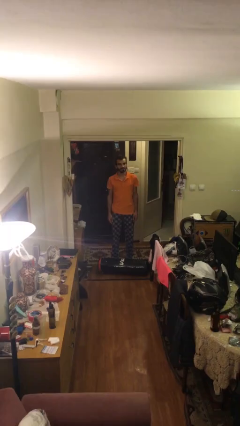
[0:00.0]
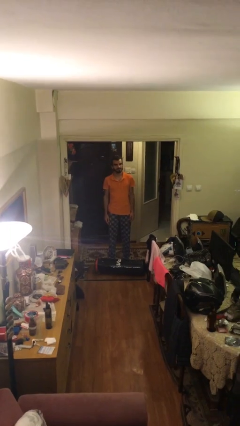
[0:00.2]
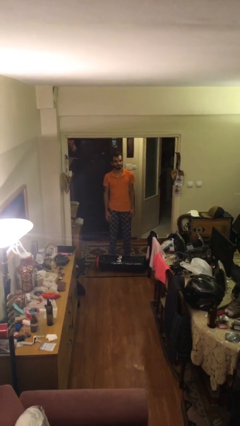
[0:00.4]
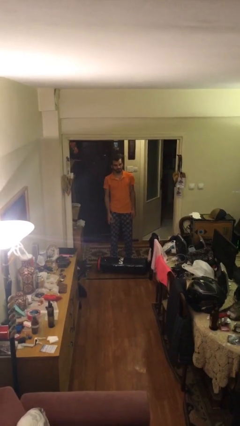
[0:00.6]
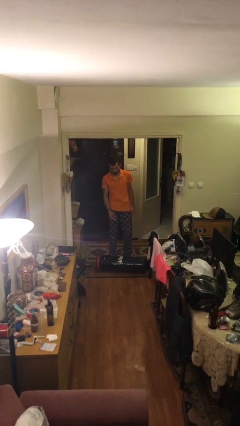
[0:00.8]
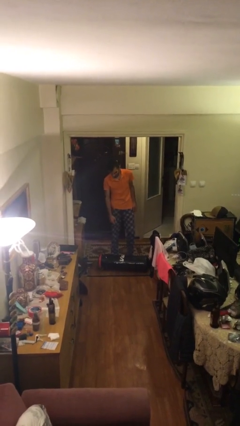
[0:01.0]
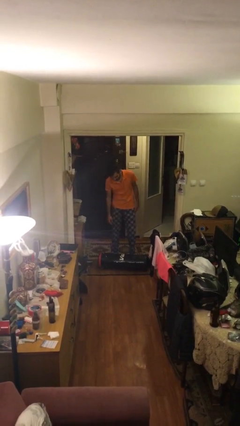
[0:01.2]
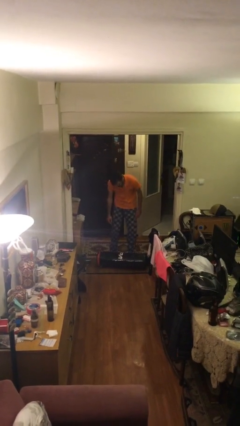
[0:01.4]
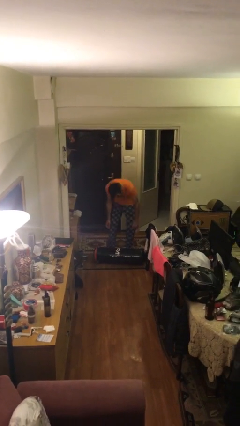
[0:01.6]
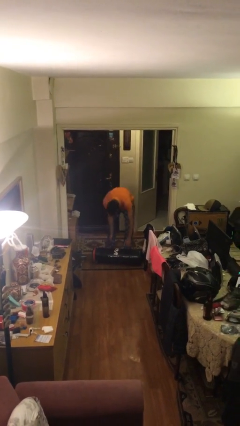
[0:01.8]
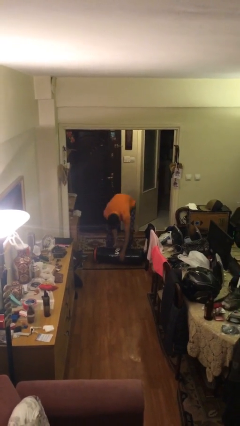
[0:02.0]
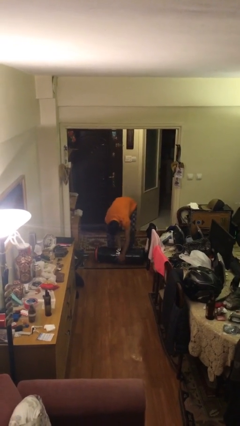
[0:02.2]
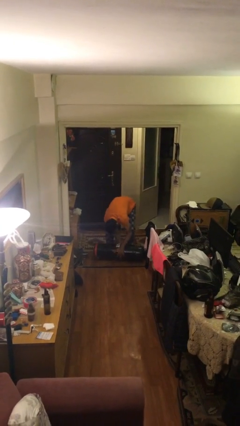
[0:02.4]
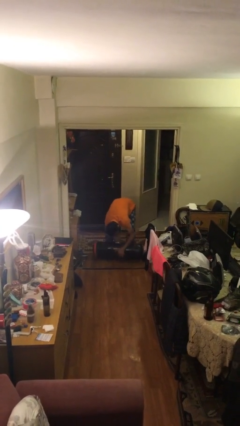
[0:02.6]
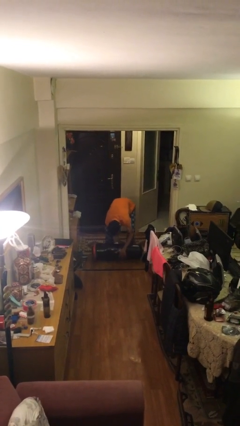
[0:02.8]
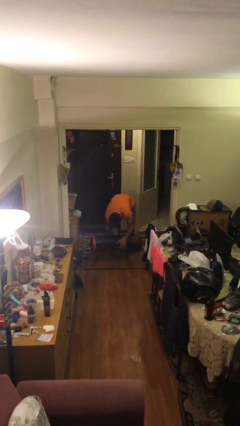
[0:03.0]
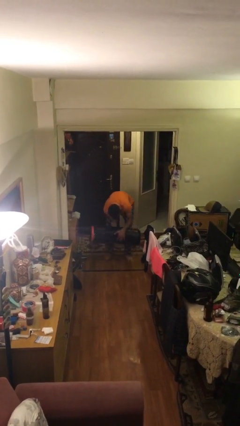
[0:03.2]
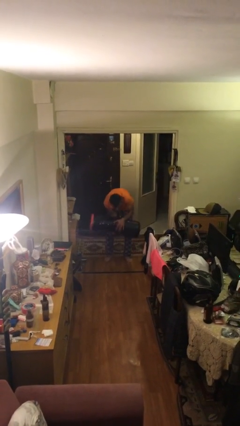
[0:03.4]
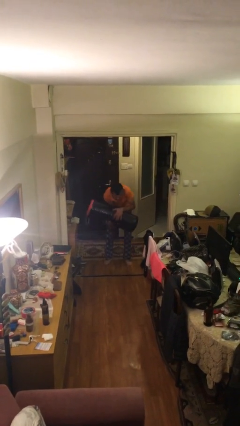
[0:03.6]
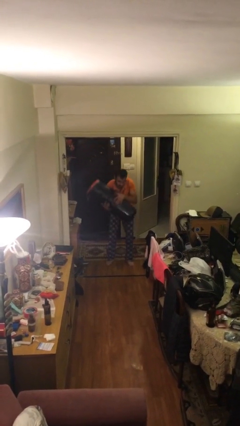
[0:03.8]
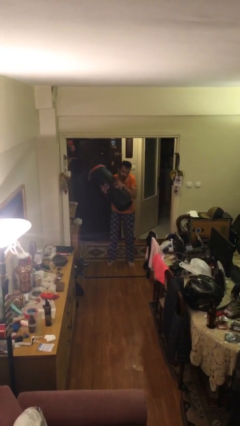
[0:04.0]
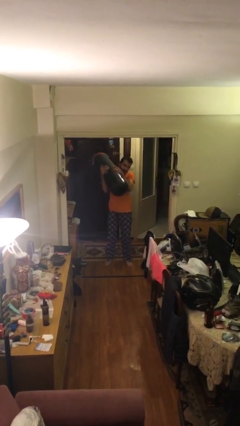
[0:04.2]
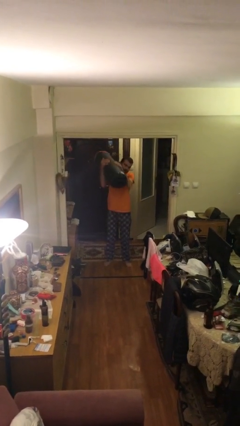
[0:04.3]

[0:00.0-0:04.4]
person picks up object from floor

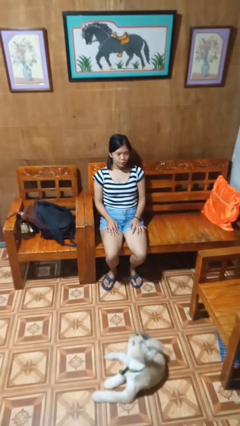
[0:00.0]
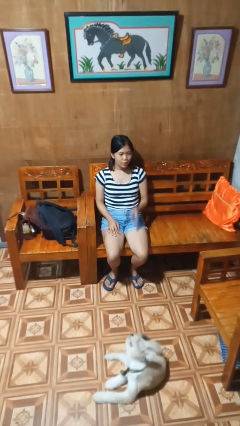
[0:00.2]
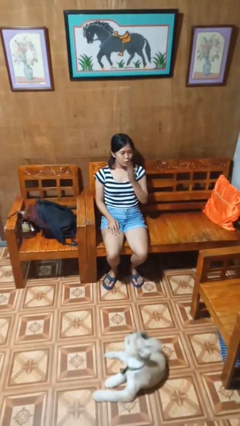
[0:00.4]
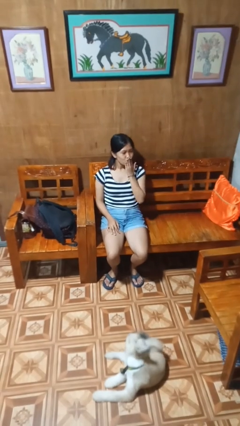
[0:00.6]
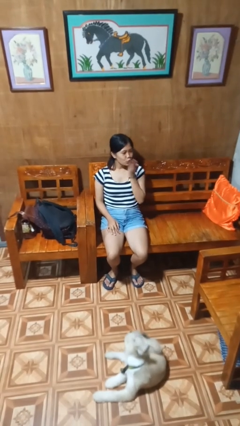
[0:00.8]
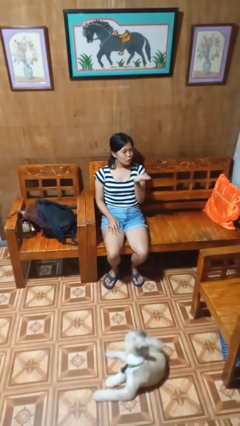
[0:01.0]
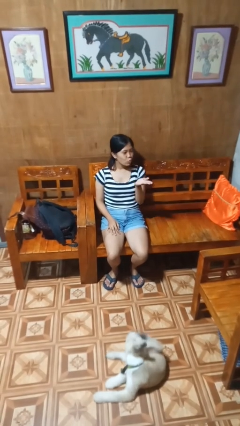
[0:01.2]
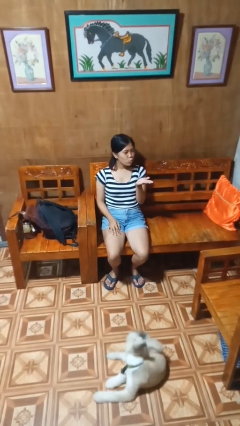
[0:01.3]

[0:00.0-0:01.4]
person gestures blow kiss

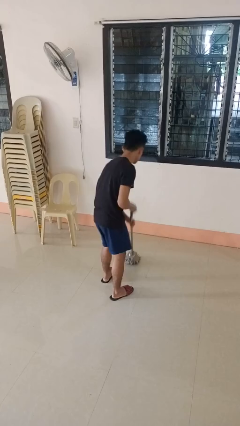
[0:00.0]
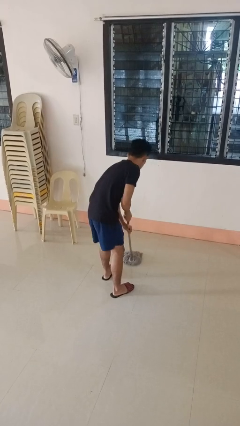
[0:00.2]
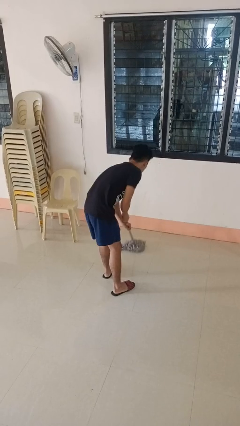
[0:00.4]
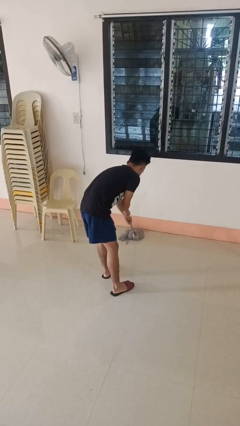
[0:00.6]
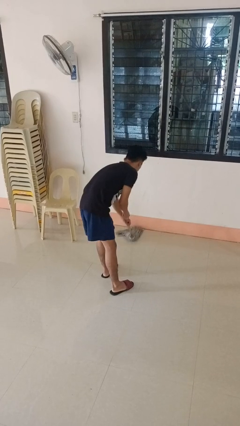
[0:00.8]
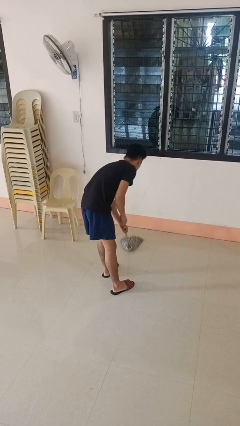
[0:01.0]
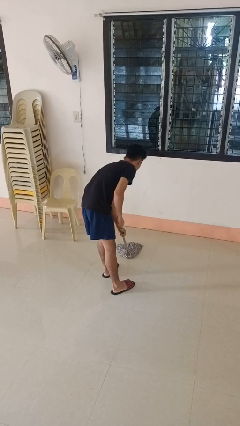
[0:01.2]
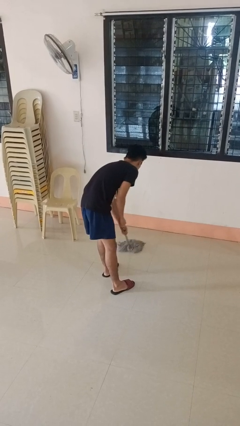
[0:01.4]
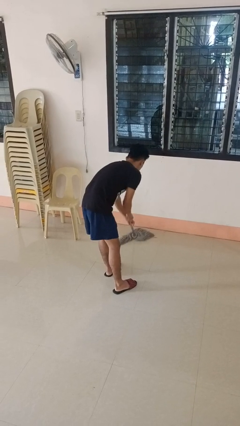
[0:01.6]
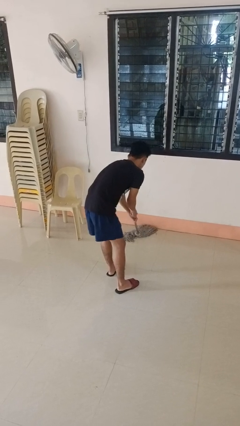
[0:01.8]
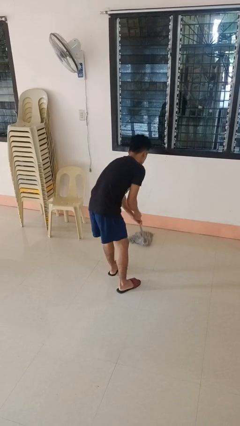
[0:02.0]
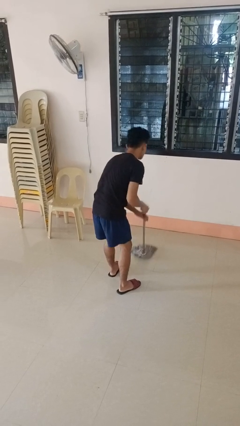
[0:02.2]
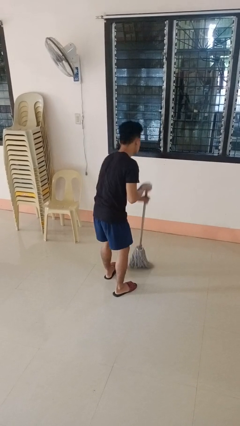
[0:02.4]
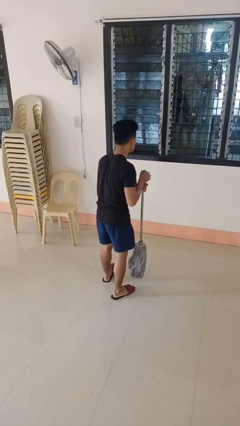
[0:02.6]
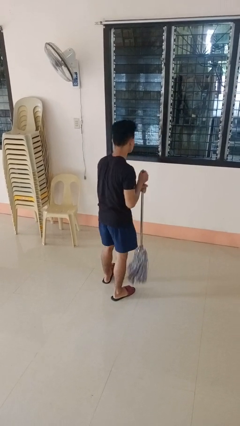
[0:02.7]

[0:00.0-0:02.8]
person mops

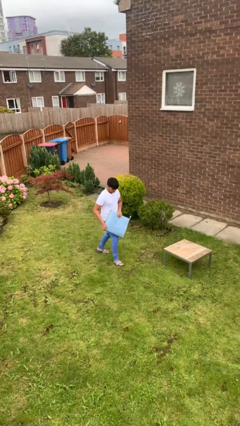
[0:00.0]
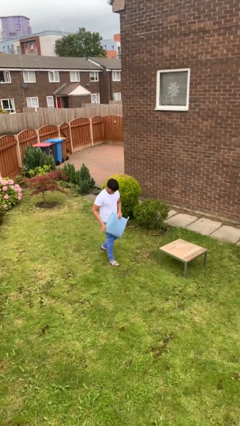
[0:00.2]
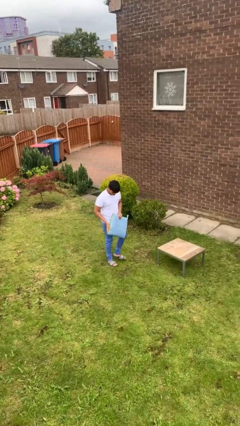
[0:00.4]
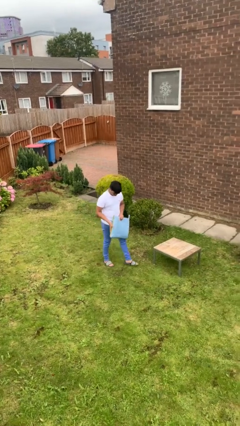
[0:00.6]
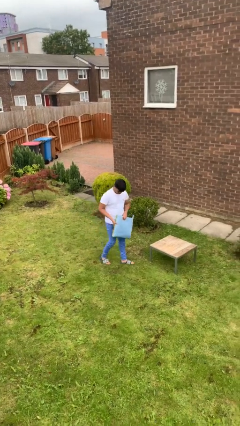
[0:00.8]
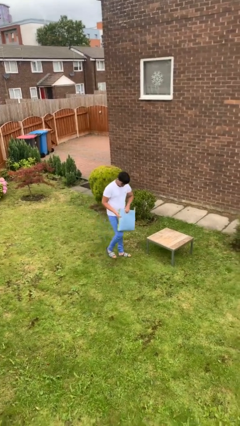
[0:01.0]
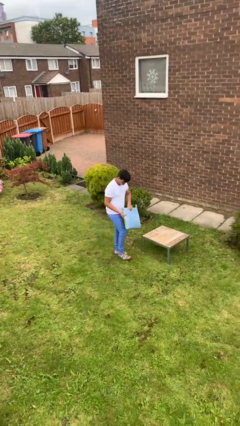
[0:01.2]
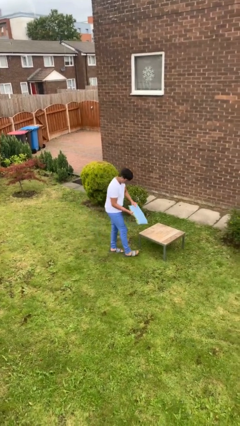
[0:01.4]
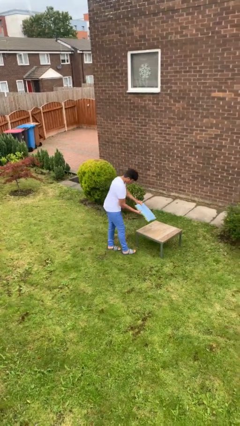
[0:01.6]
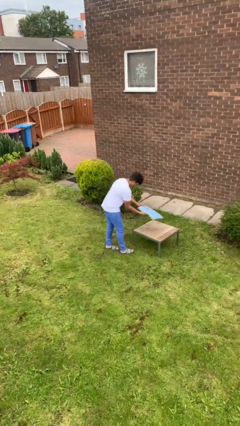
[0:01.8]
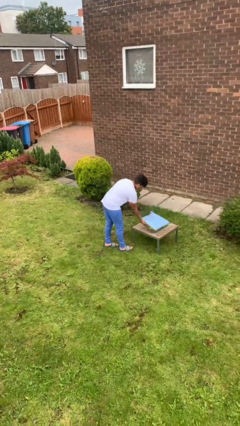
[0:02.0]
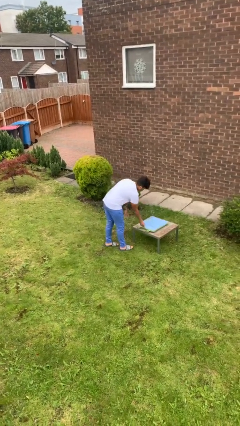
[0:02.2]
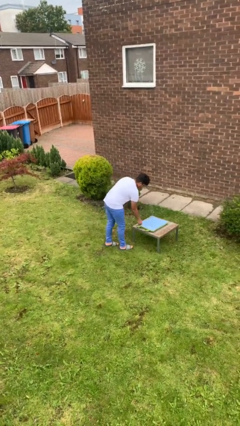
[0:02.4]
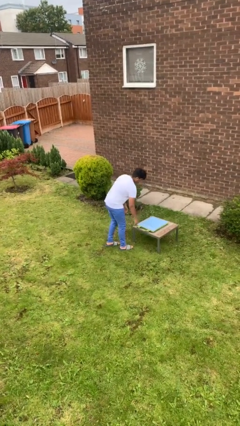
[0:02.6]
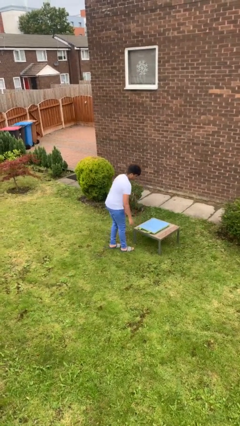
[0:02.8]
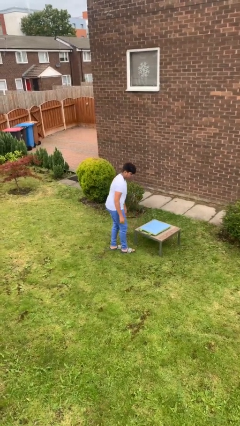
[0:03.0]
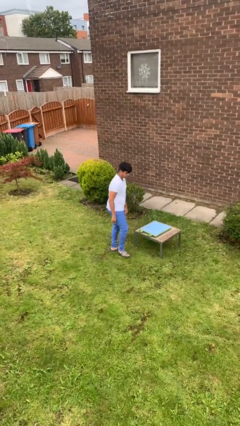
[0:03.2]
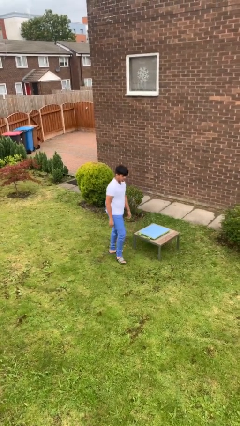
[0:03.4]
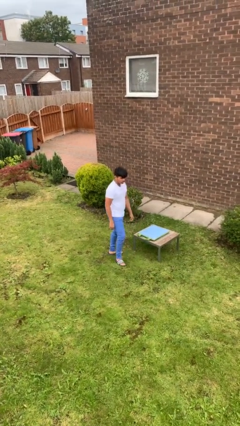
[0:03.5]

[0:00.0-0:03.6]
person puts down object on table

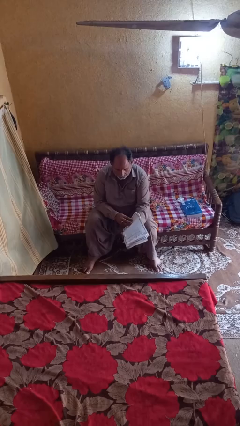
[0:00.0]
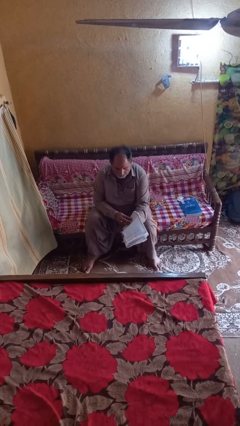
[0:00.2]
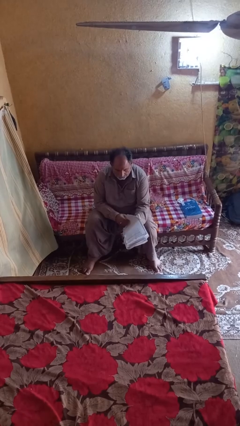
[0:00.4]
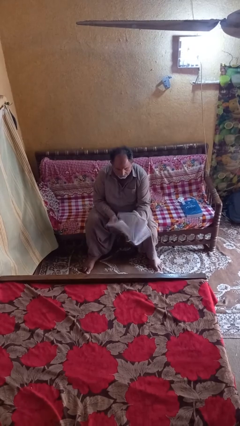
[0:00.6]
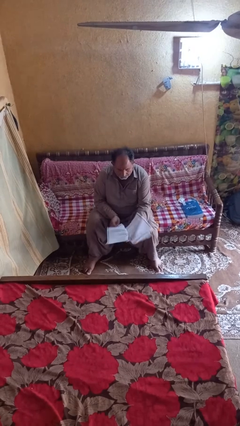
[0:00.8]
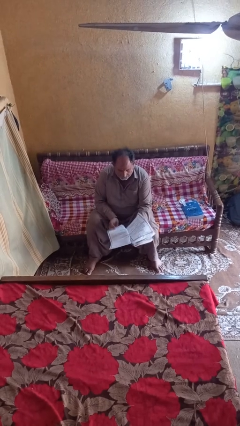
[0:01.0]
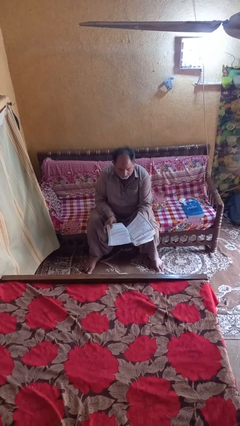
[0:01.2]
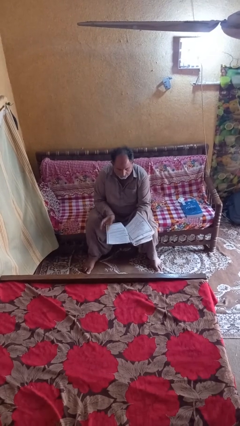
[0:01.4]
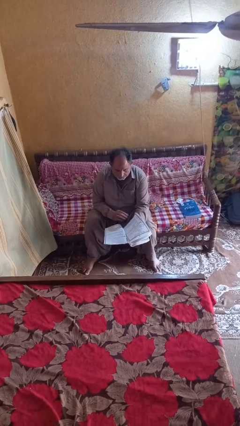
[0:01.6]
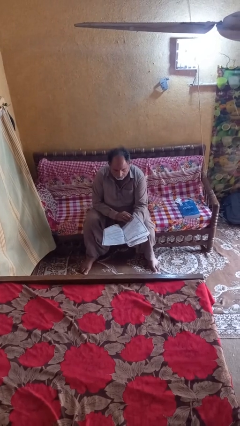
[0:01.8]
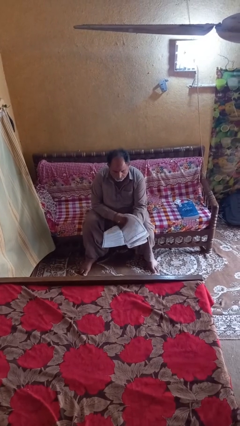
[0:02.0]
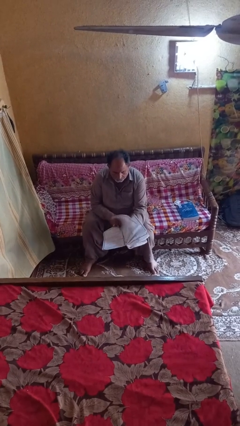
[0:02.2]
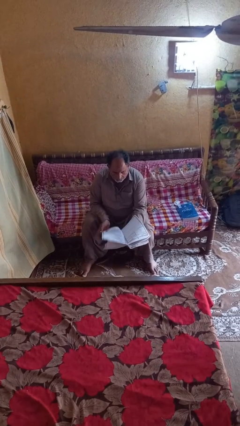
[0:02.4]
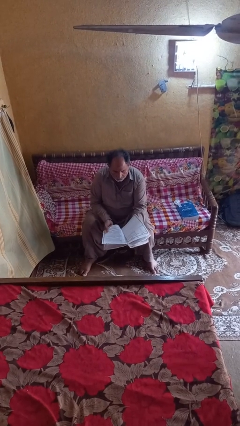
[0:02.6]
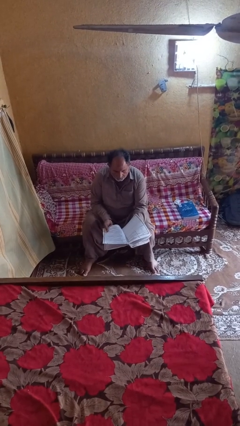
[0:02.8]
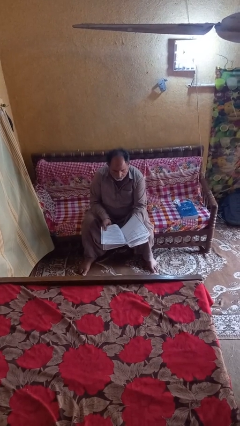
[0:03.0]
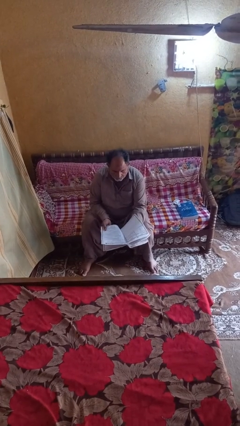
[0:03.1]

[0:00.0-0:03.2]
person reads magazine

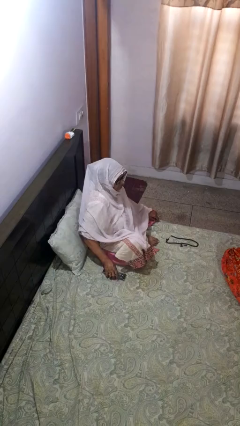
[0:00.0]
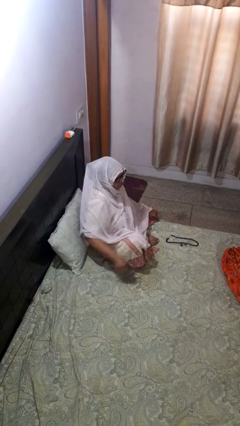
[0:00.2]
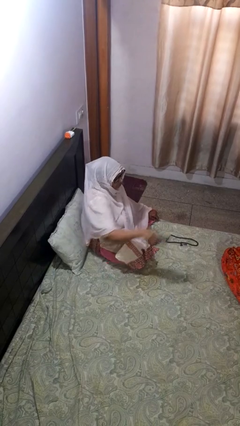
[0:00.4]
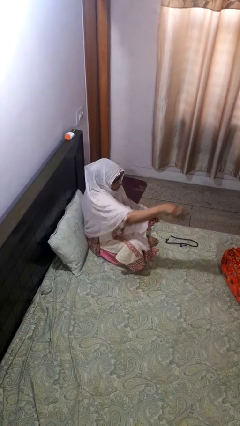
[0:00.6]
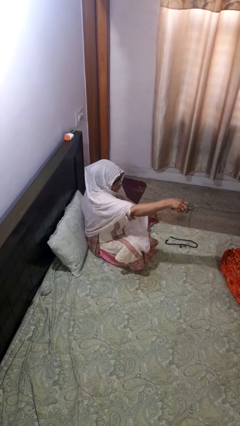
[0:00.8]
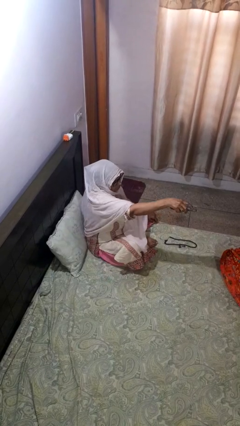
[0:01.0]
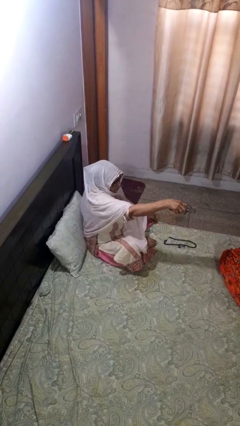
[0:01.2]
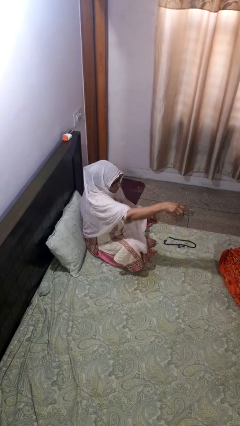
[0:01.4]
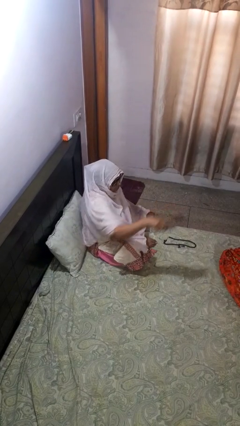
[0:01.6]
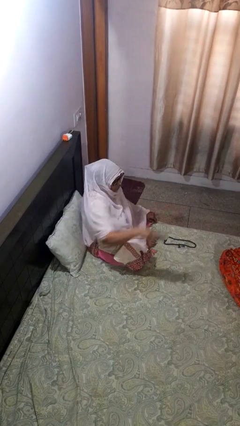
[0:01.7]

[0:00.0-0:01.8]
person uses television remote

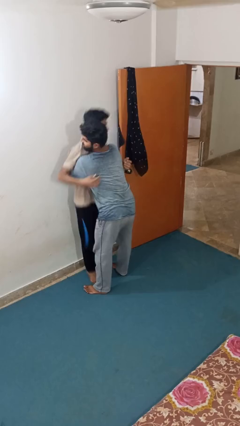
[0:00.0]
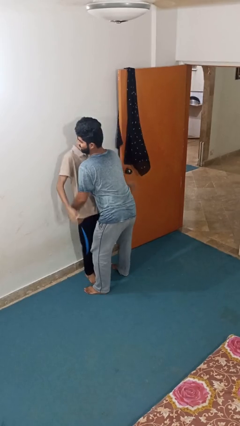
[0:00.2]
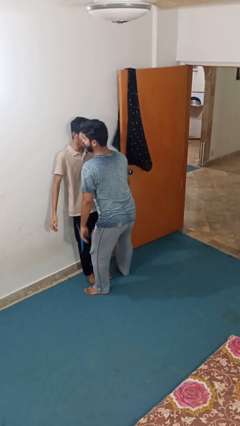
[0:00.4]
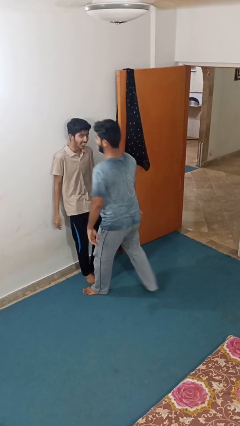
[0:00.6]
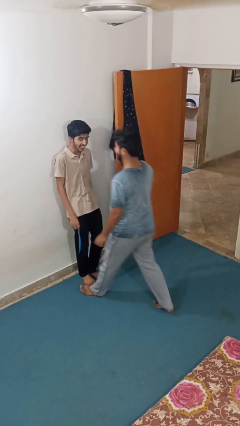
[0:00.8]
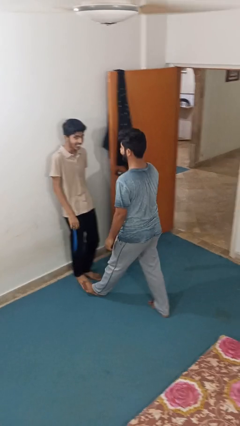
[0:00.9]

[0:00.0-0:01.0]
person puts down person
